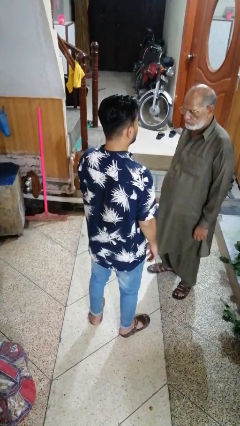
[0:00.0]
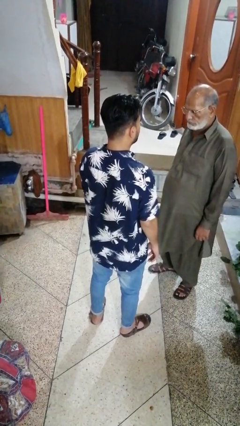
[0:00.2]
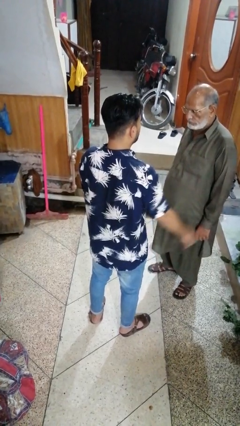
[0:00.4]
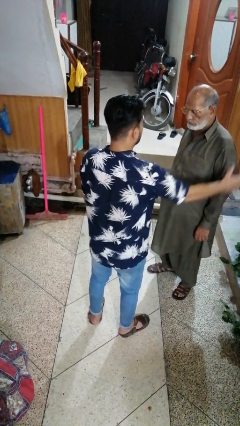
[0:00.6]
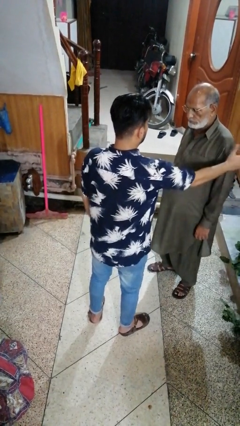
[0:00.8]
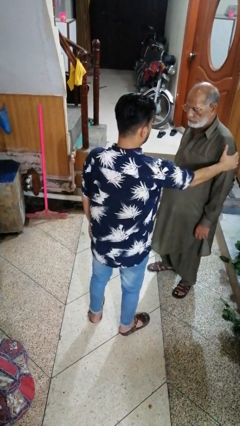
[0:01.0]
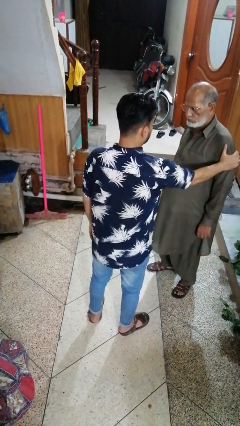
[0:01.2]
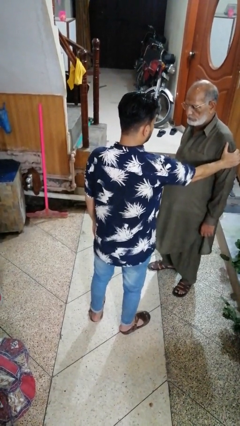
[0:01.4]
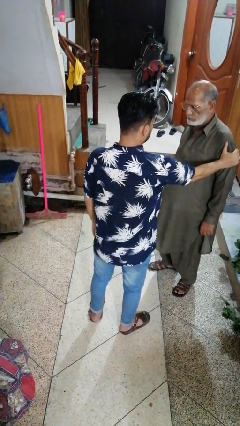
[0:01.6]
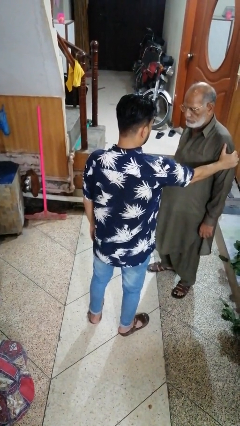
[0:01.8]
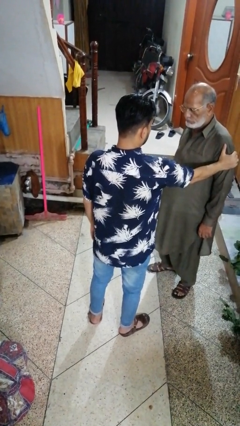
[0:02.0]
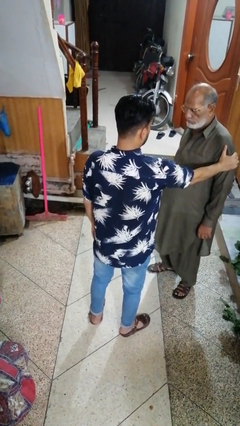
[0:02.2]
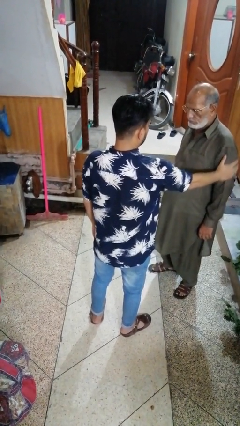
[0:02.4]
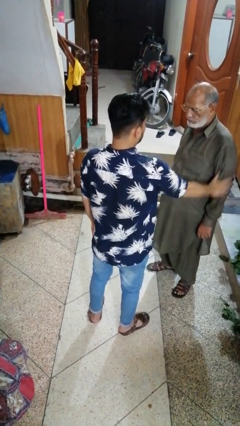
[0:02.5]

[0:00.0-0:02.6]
person grabs person by bicep

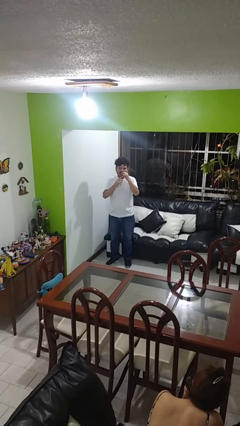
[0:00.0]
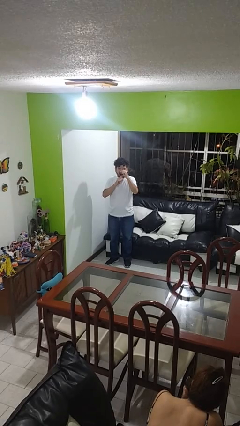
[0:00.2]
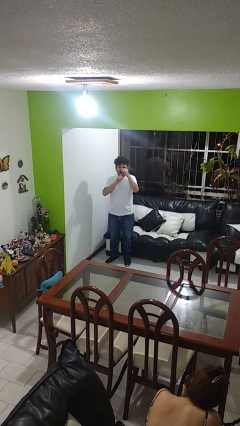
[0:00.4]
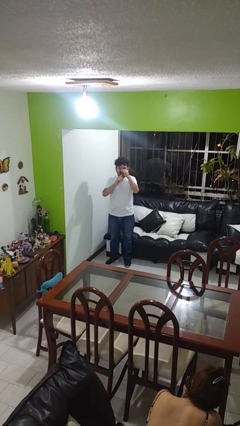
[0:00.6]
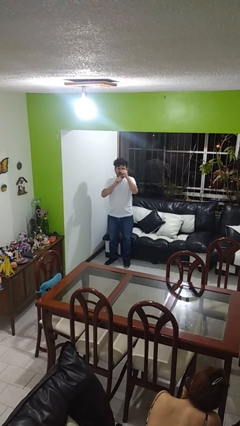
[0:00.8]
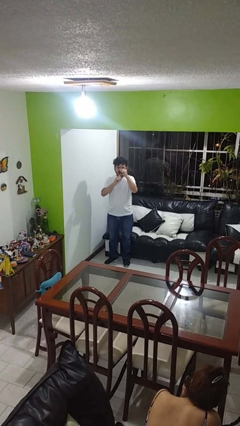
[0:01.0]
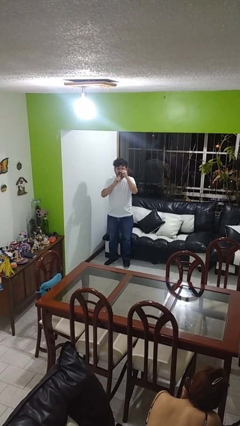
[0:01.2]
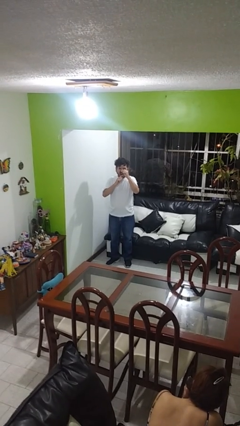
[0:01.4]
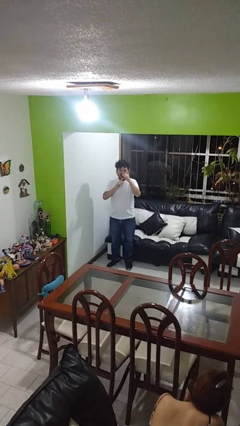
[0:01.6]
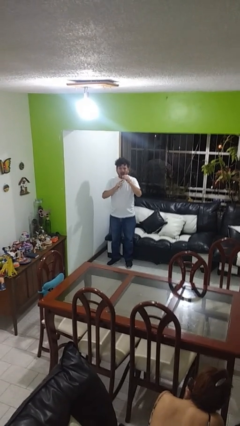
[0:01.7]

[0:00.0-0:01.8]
person flosses

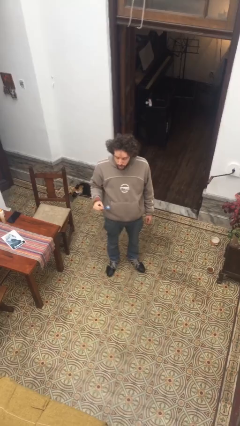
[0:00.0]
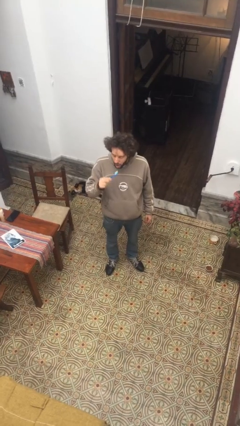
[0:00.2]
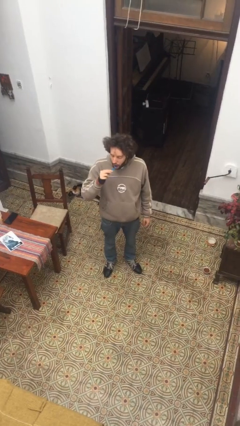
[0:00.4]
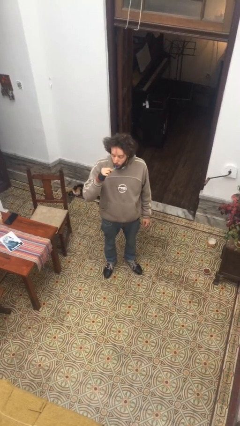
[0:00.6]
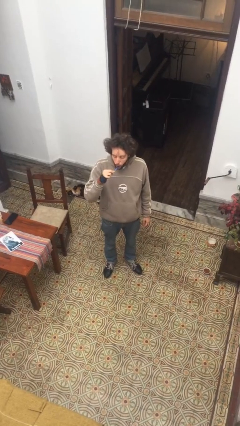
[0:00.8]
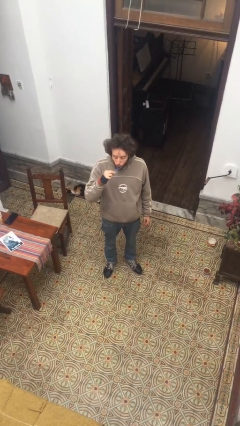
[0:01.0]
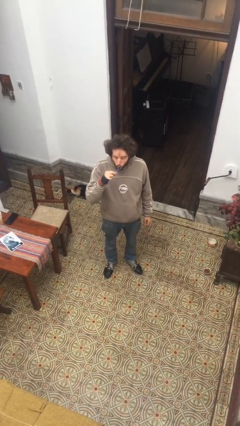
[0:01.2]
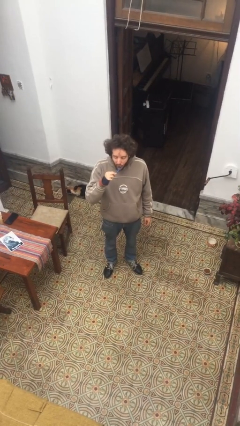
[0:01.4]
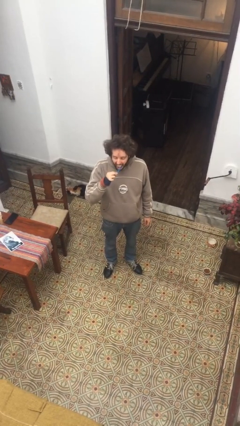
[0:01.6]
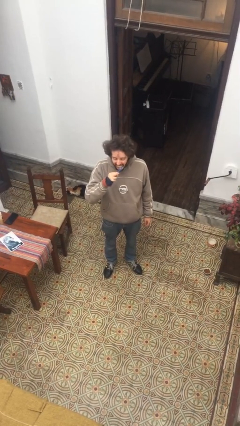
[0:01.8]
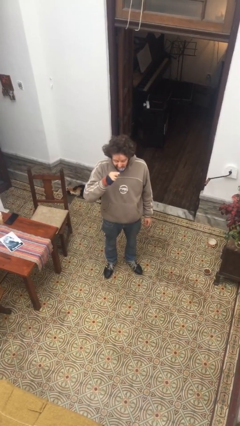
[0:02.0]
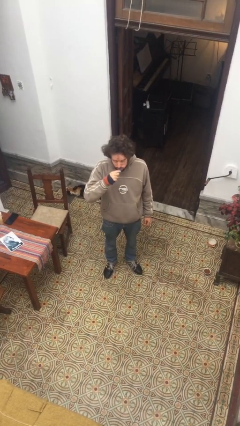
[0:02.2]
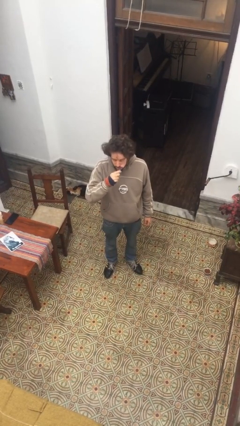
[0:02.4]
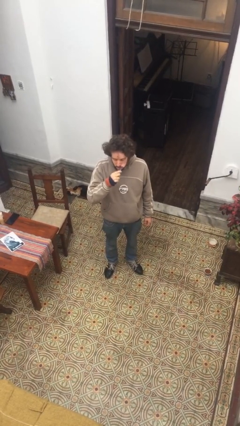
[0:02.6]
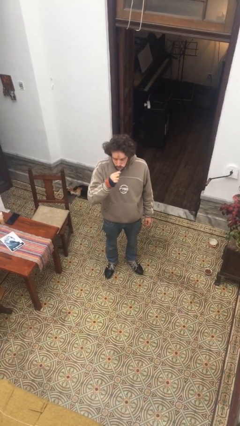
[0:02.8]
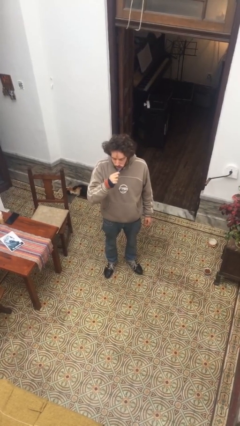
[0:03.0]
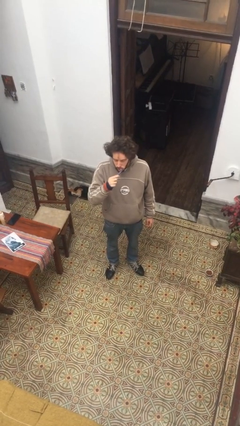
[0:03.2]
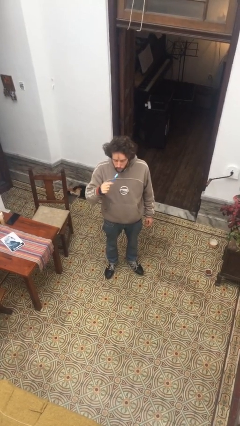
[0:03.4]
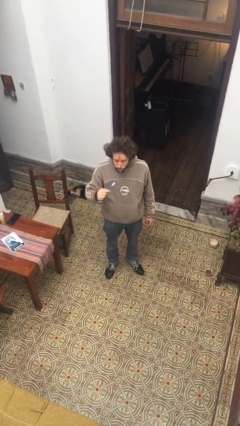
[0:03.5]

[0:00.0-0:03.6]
person brushes teeth

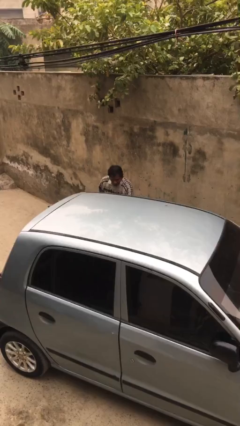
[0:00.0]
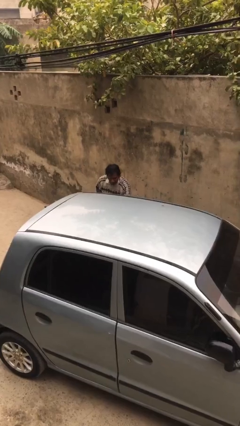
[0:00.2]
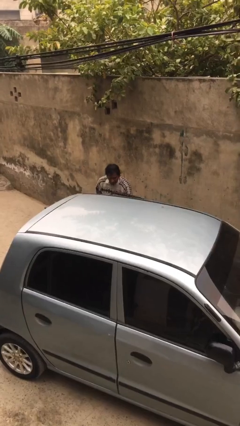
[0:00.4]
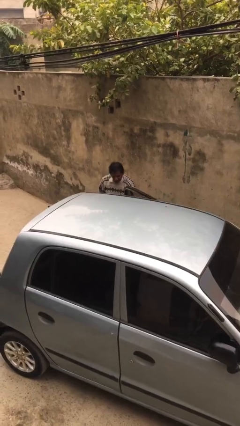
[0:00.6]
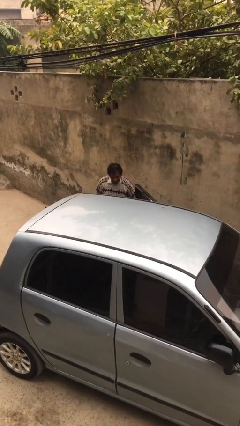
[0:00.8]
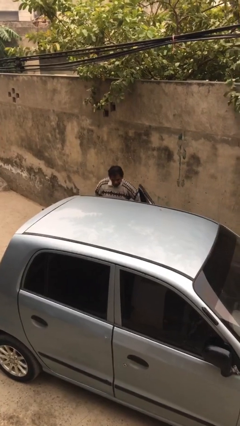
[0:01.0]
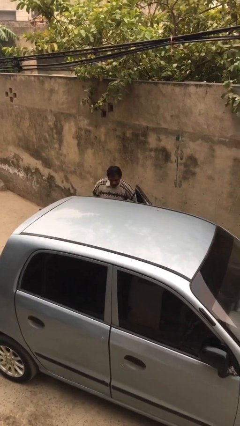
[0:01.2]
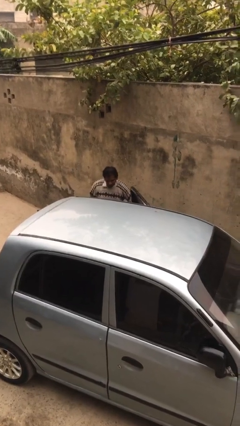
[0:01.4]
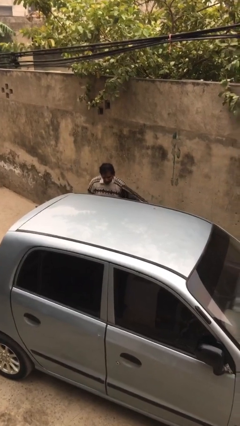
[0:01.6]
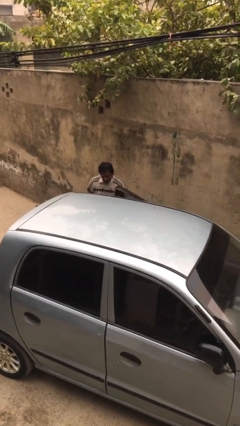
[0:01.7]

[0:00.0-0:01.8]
person opens car door

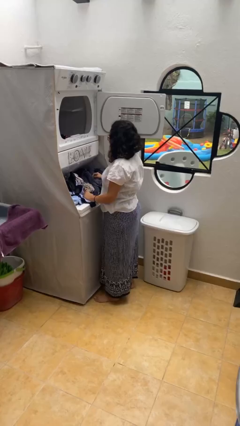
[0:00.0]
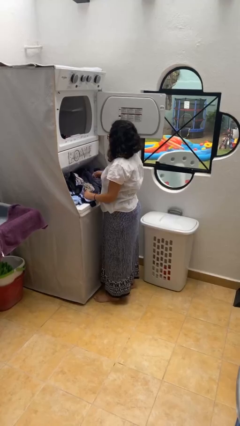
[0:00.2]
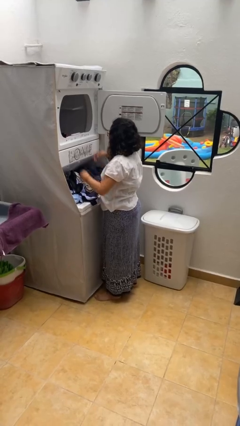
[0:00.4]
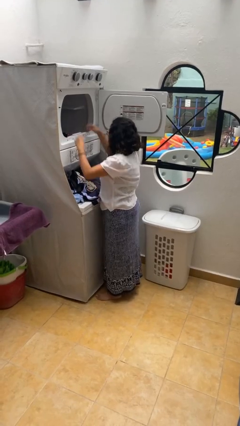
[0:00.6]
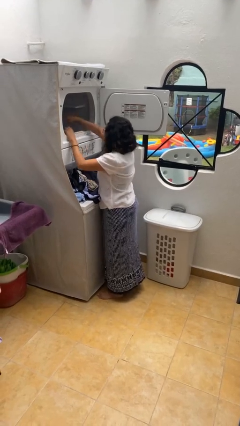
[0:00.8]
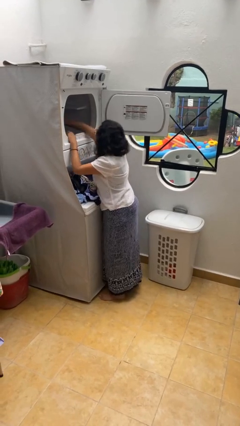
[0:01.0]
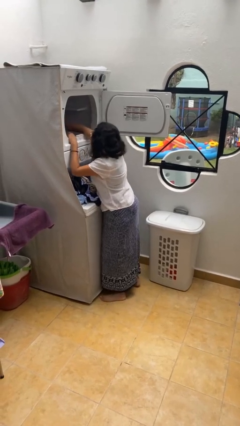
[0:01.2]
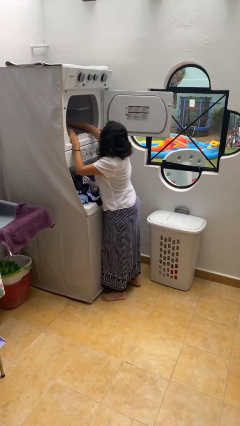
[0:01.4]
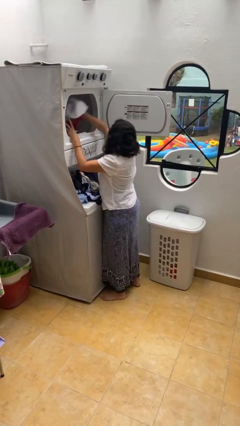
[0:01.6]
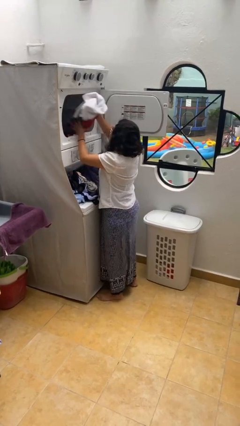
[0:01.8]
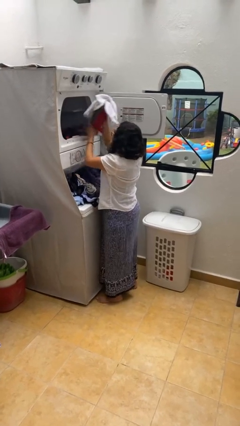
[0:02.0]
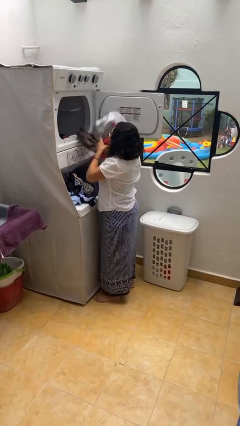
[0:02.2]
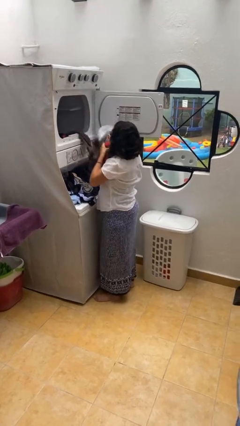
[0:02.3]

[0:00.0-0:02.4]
person unloads dryer

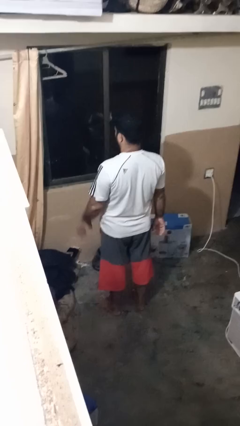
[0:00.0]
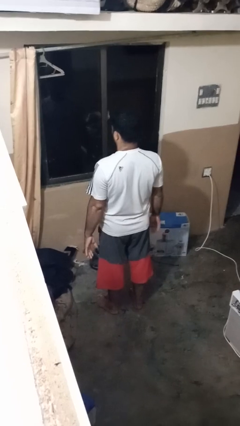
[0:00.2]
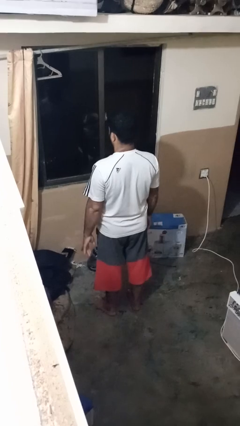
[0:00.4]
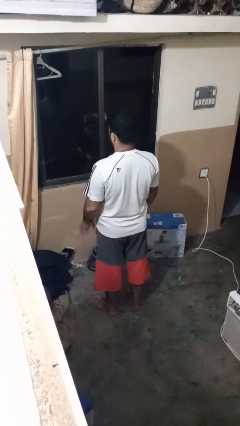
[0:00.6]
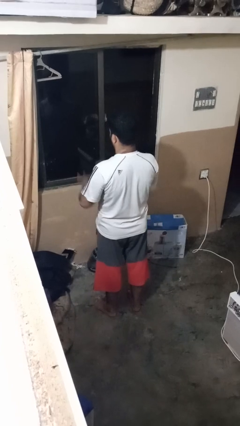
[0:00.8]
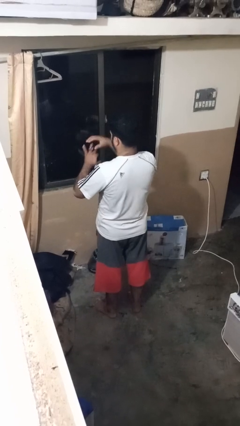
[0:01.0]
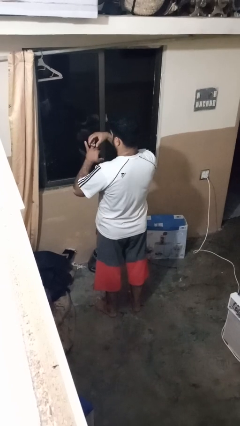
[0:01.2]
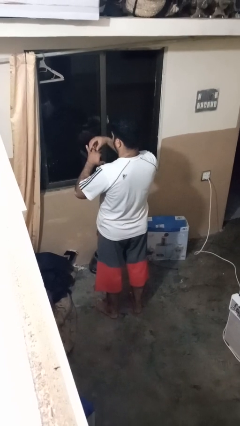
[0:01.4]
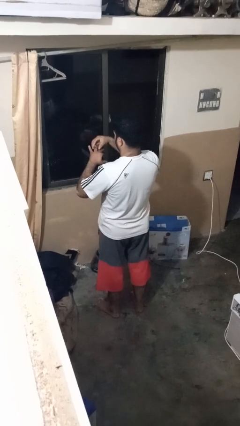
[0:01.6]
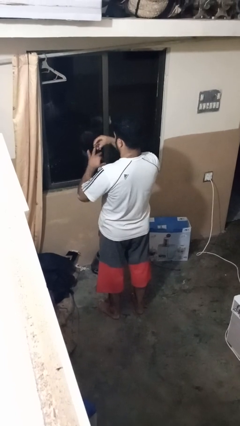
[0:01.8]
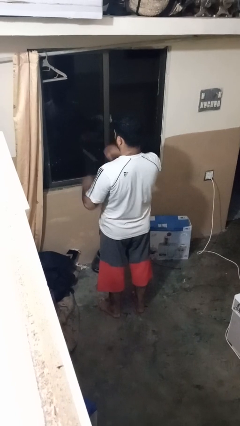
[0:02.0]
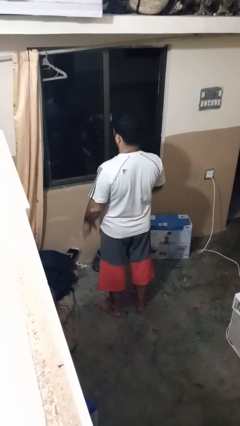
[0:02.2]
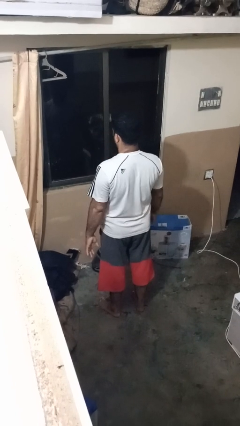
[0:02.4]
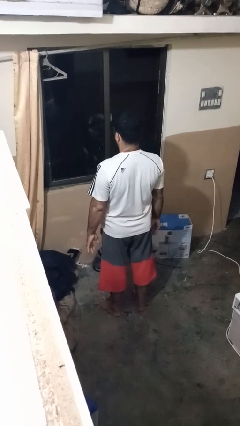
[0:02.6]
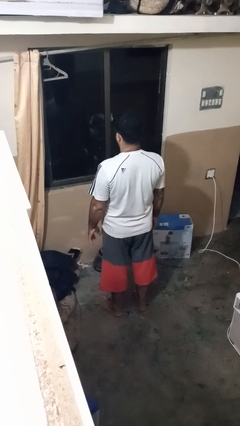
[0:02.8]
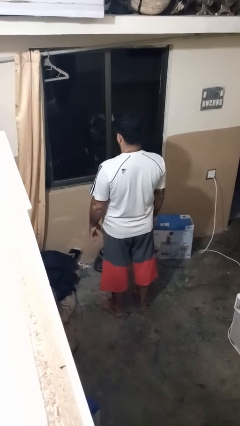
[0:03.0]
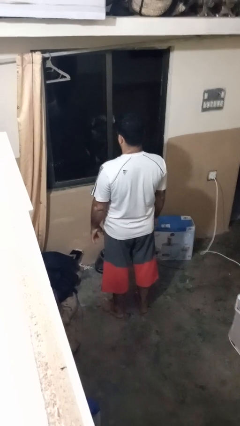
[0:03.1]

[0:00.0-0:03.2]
person takes off ring

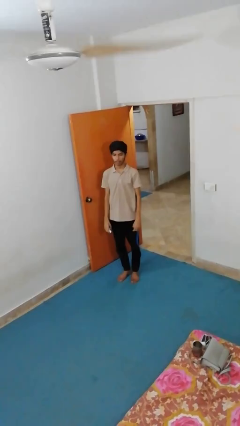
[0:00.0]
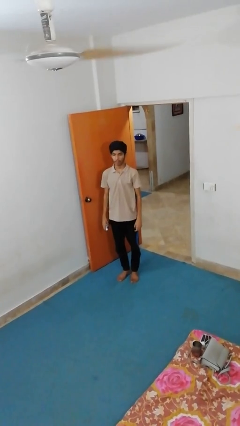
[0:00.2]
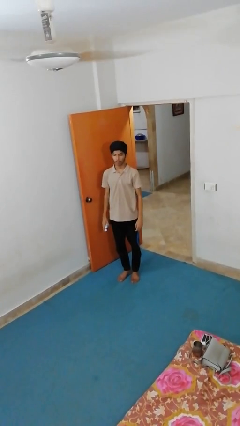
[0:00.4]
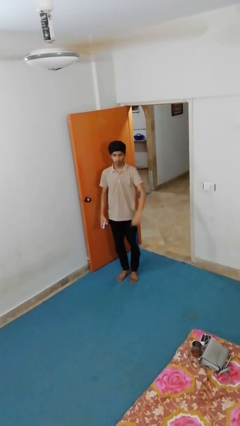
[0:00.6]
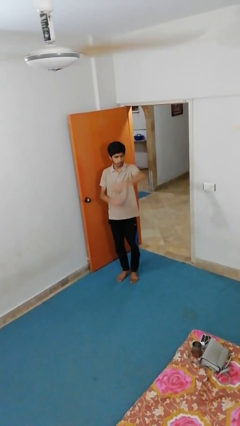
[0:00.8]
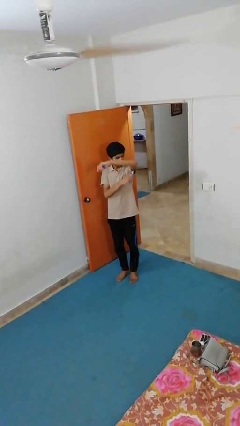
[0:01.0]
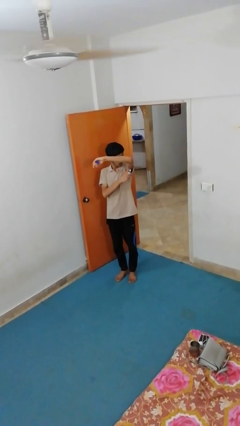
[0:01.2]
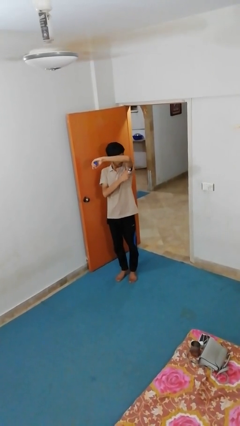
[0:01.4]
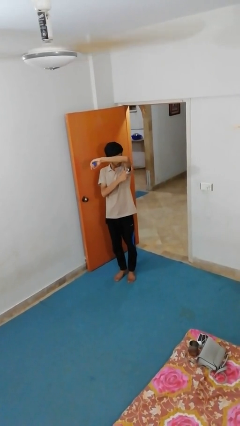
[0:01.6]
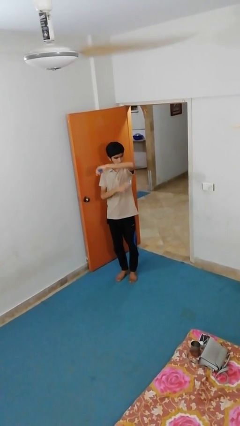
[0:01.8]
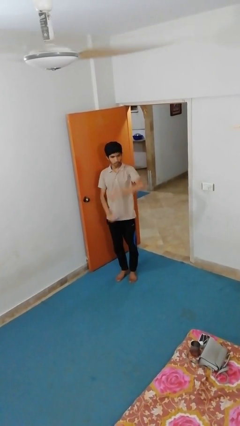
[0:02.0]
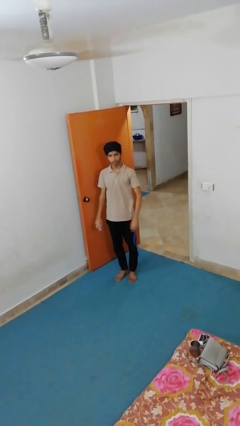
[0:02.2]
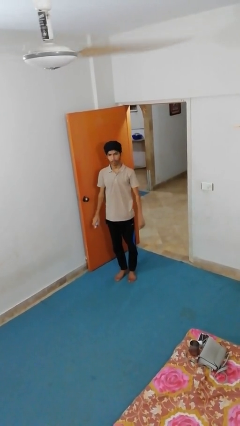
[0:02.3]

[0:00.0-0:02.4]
person applies deodorant
